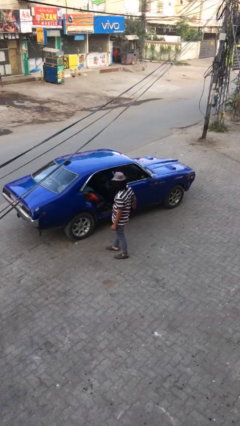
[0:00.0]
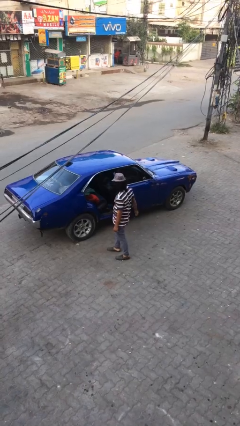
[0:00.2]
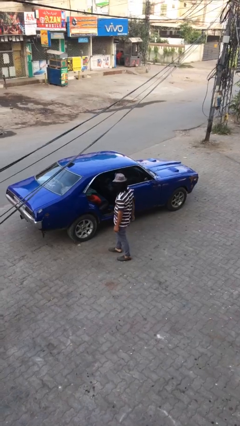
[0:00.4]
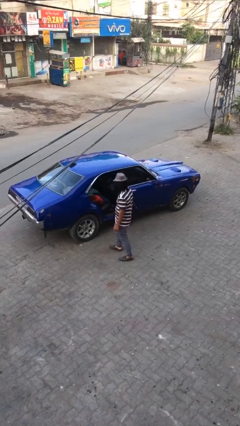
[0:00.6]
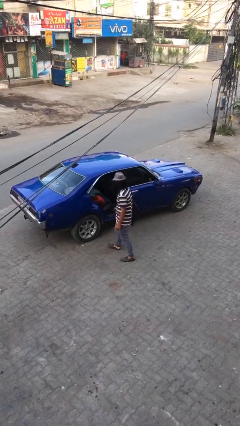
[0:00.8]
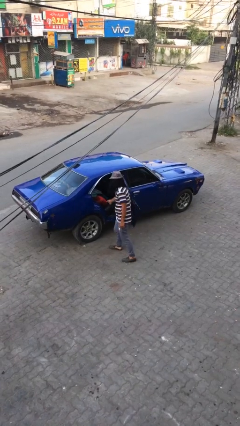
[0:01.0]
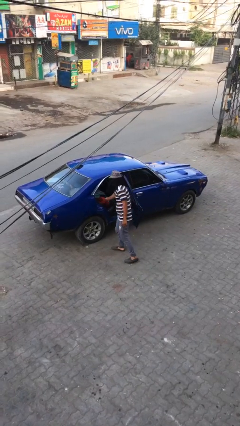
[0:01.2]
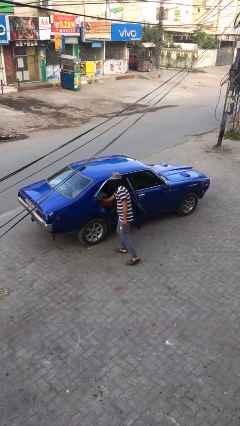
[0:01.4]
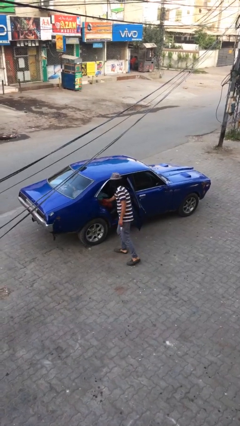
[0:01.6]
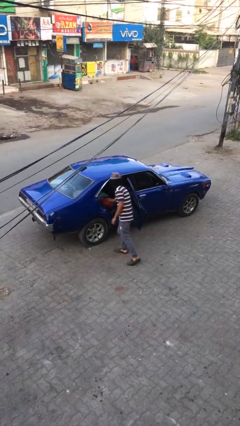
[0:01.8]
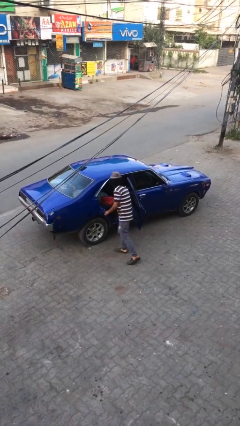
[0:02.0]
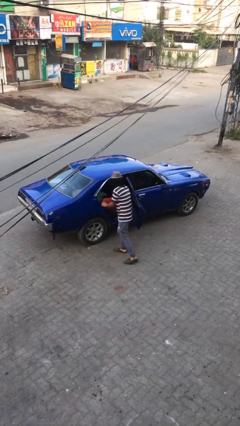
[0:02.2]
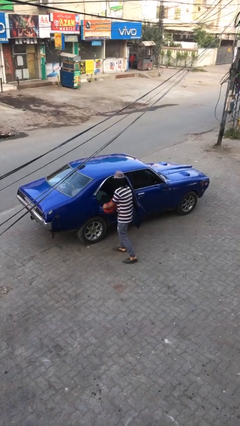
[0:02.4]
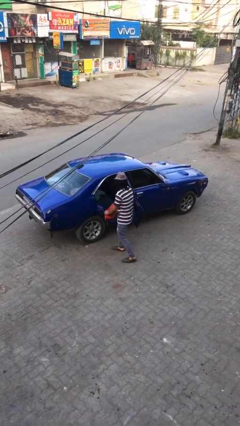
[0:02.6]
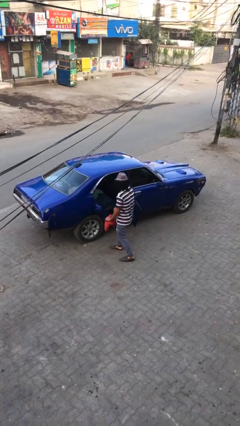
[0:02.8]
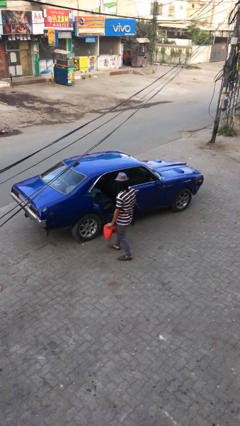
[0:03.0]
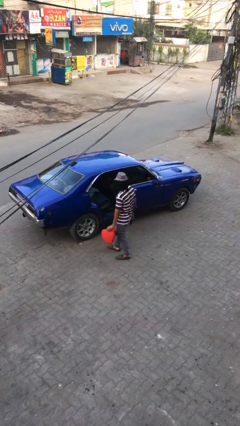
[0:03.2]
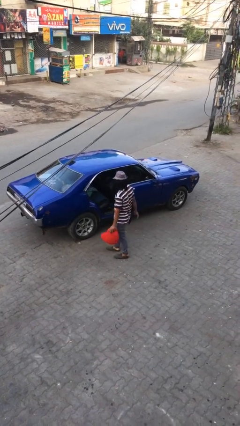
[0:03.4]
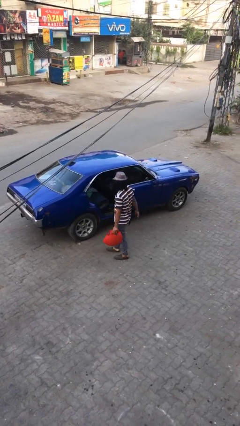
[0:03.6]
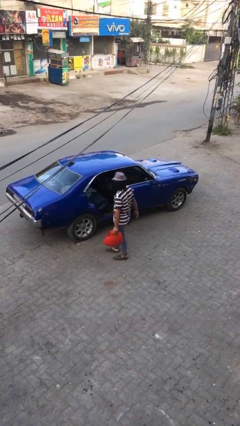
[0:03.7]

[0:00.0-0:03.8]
person unloads car

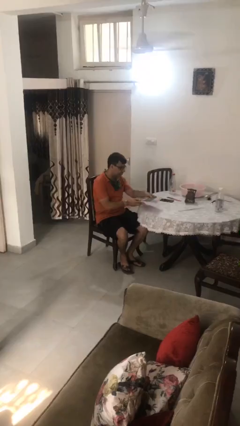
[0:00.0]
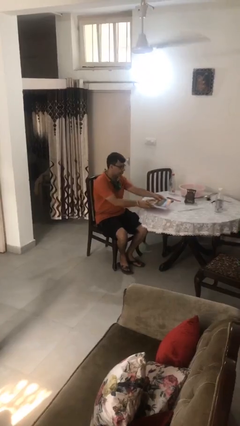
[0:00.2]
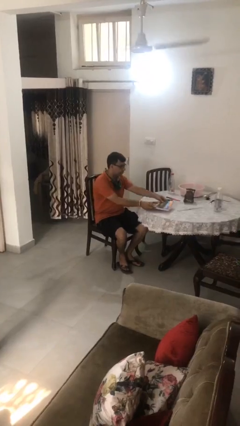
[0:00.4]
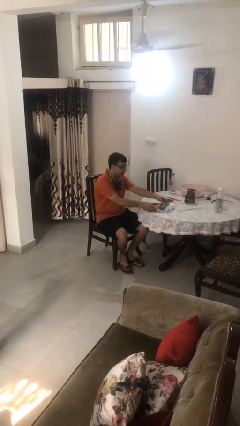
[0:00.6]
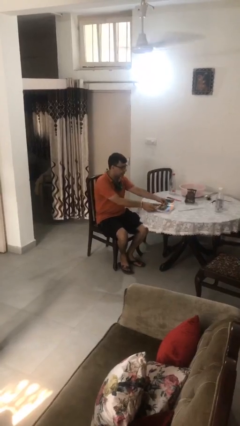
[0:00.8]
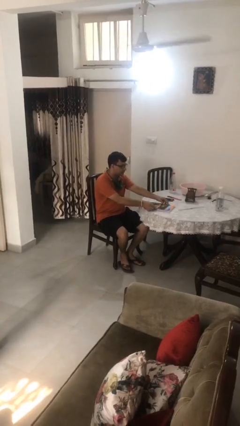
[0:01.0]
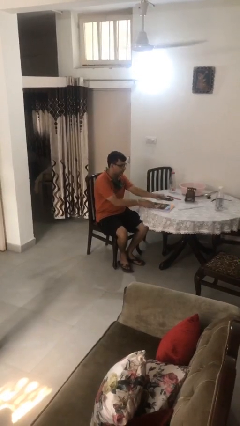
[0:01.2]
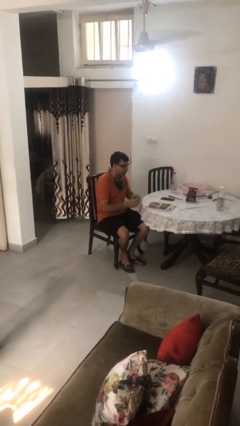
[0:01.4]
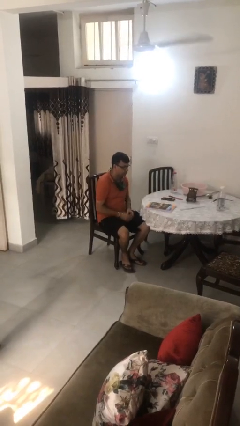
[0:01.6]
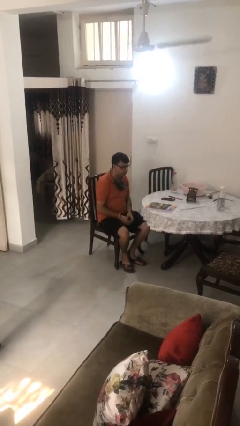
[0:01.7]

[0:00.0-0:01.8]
person puts down object on table

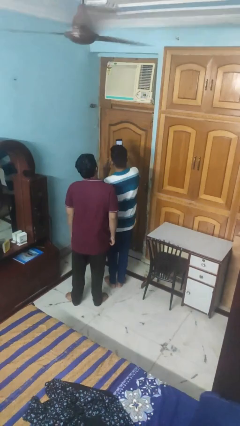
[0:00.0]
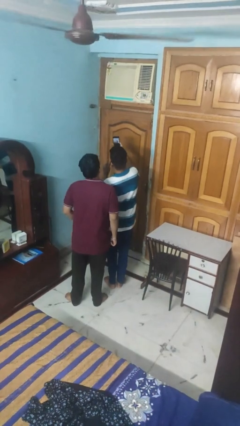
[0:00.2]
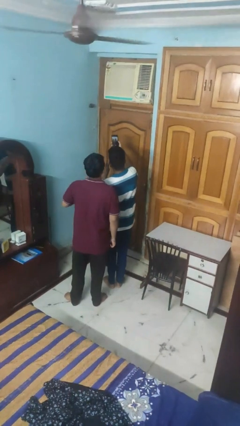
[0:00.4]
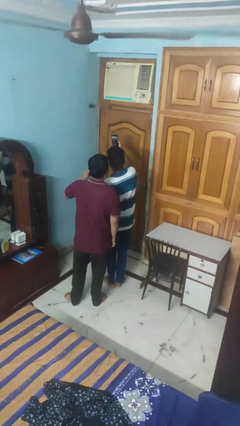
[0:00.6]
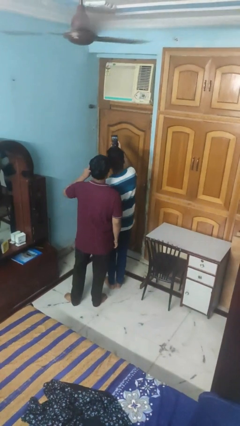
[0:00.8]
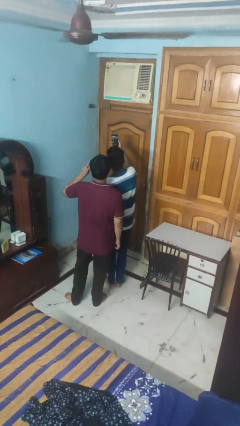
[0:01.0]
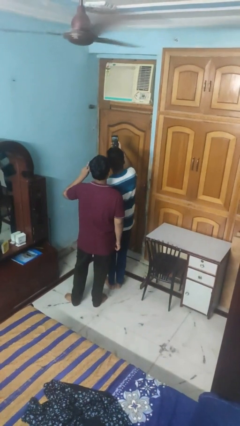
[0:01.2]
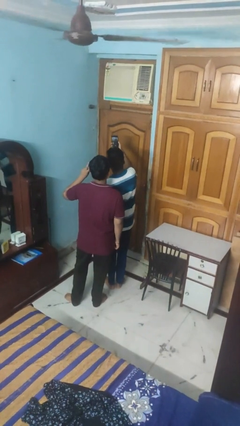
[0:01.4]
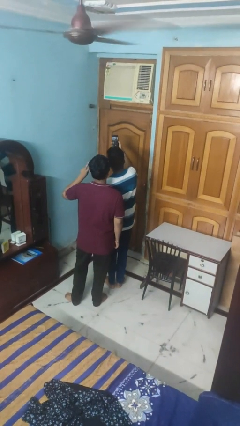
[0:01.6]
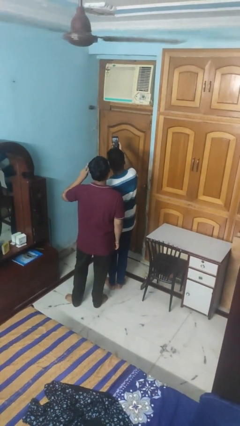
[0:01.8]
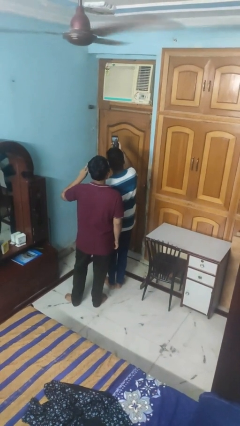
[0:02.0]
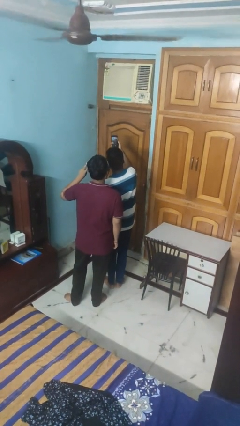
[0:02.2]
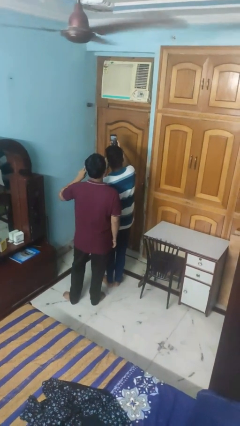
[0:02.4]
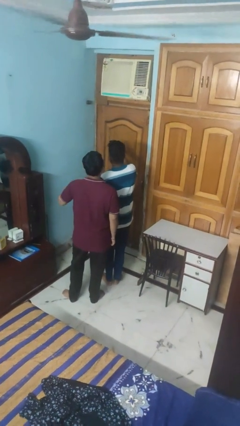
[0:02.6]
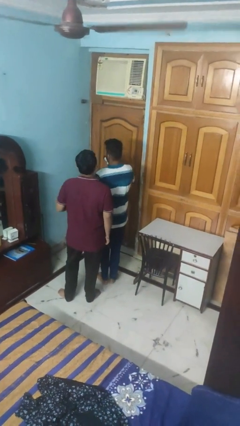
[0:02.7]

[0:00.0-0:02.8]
person takes selfie with person

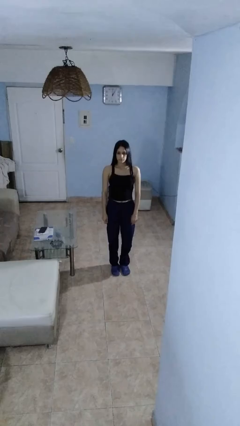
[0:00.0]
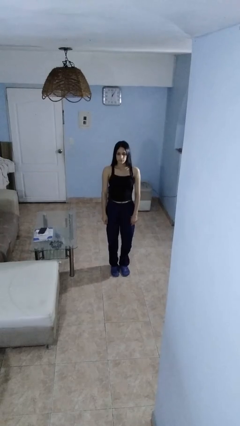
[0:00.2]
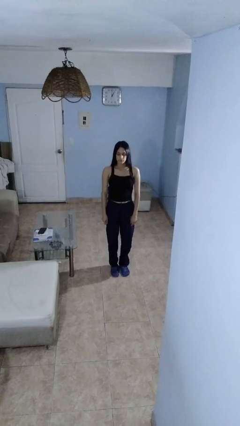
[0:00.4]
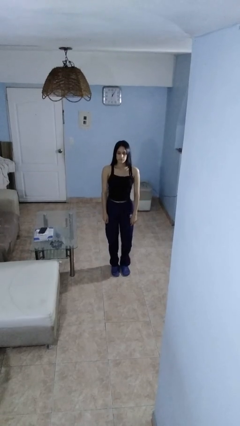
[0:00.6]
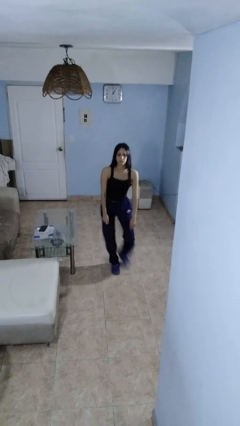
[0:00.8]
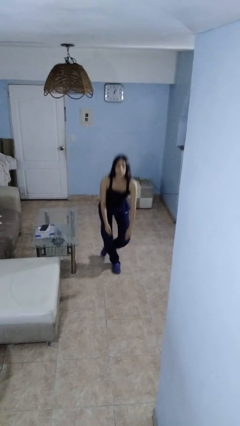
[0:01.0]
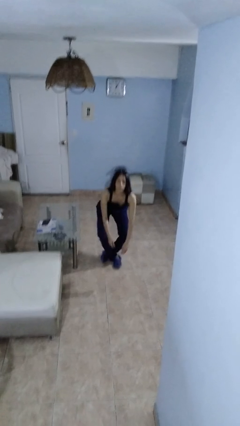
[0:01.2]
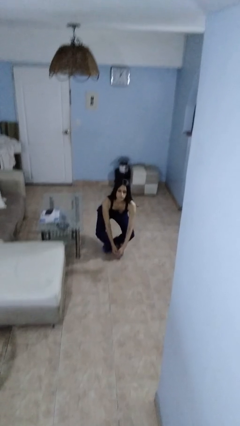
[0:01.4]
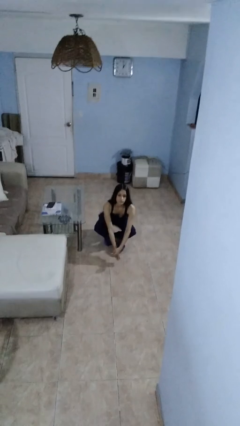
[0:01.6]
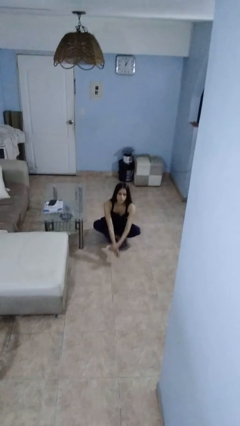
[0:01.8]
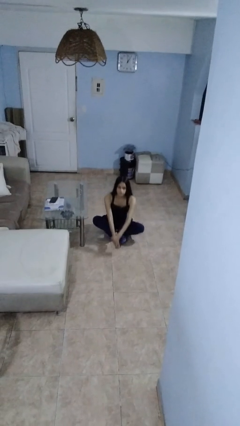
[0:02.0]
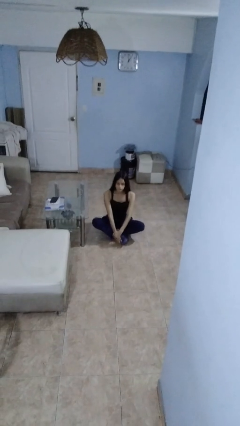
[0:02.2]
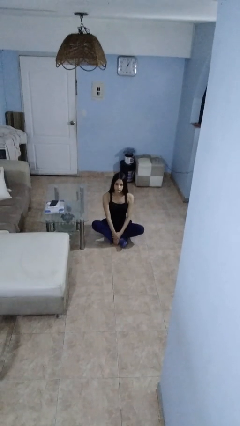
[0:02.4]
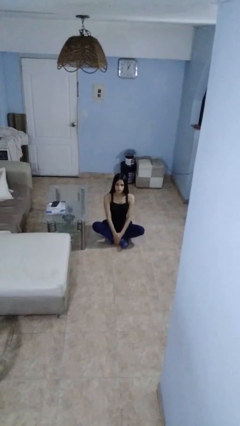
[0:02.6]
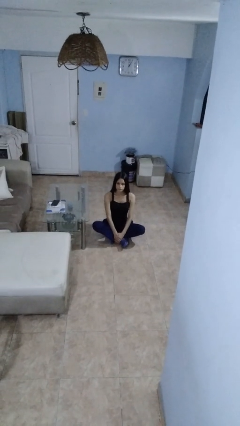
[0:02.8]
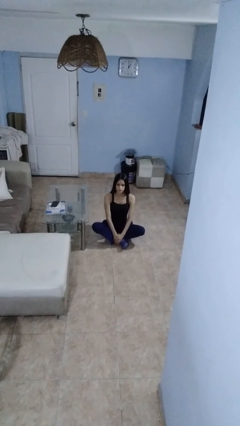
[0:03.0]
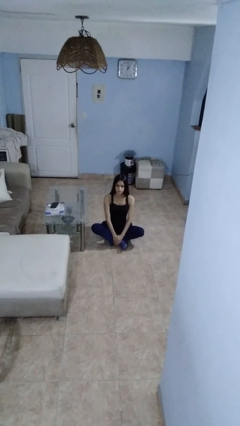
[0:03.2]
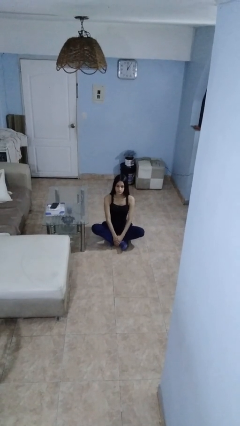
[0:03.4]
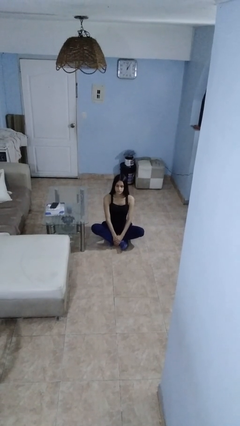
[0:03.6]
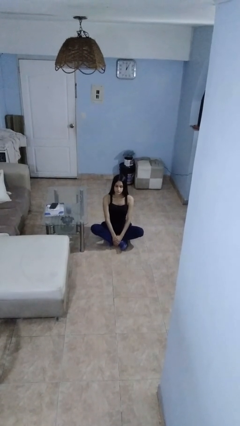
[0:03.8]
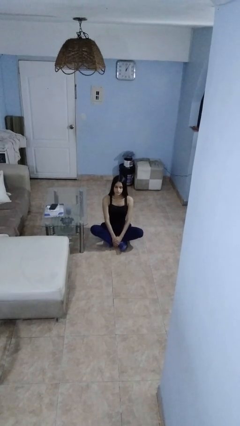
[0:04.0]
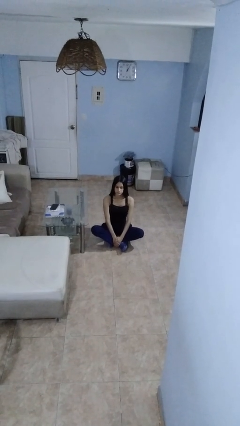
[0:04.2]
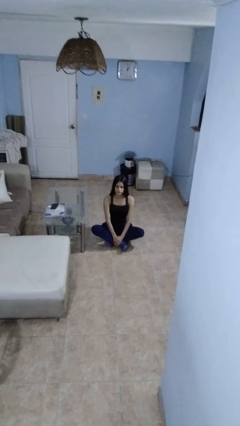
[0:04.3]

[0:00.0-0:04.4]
person sits crisscross

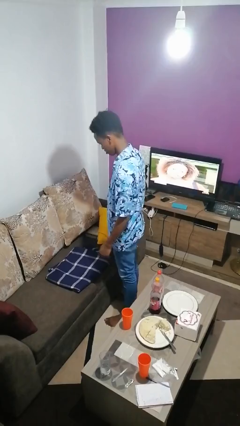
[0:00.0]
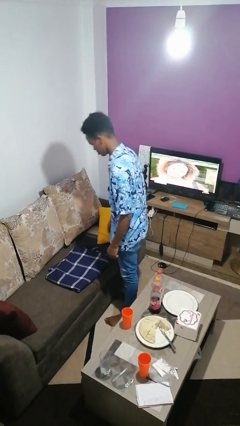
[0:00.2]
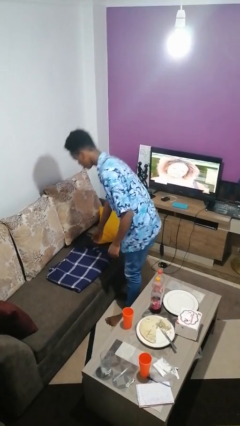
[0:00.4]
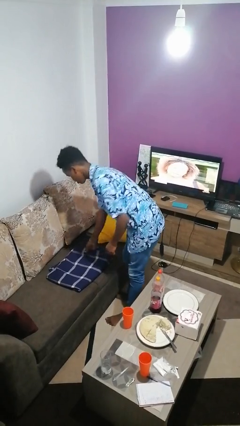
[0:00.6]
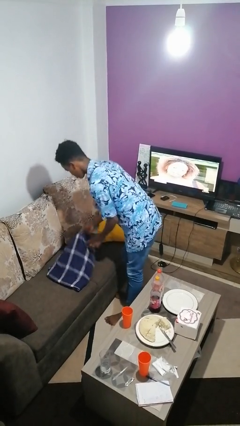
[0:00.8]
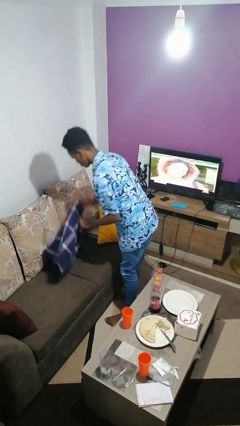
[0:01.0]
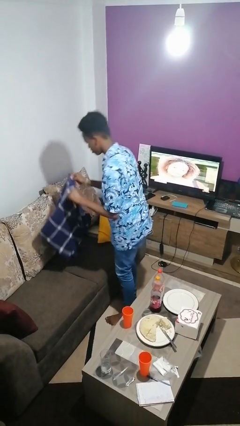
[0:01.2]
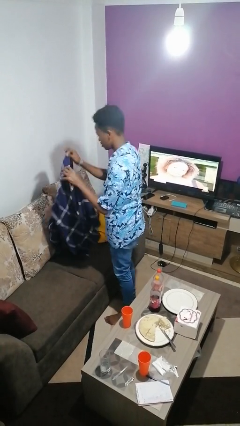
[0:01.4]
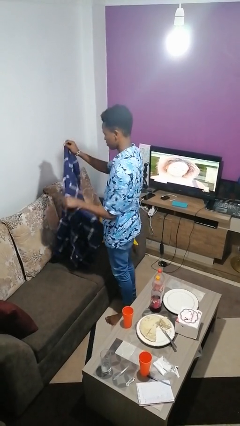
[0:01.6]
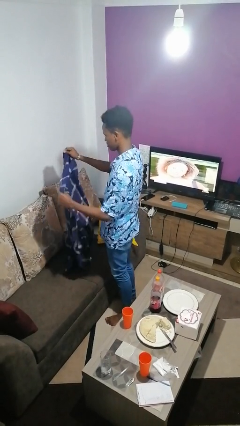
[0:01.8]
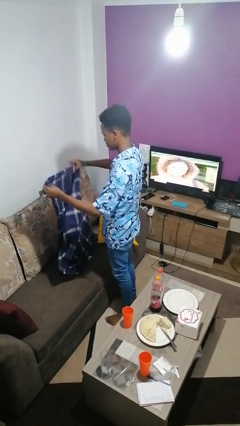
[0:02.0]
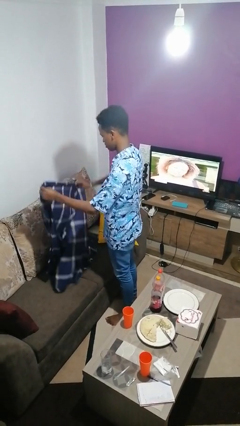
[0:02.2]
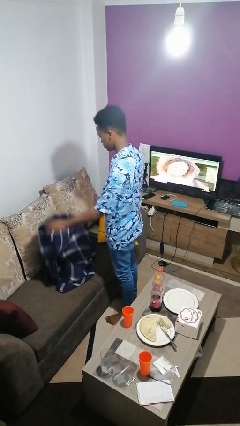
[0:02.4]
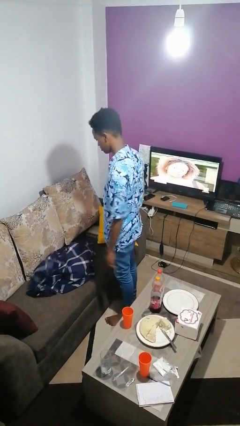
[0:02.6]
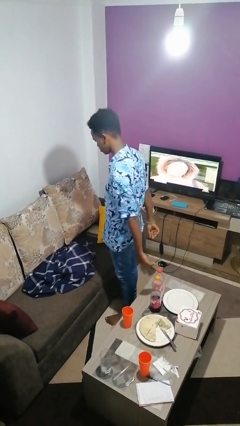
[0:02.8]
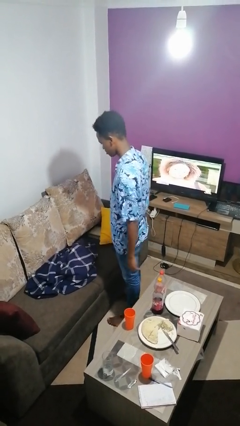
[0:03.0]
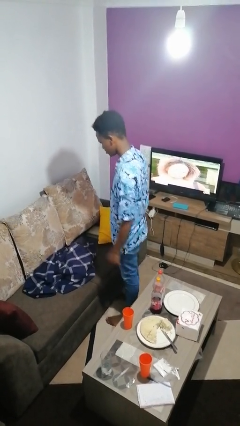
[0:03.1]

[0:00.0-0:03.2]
person unfolds blanket

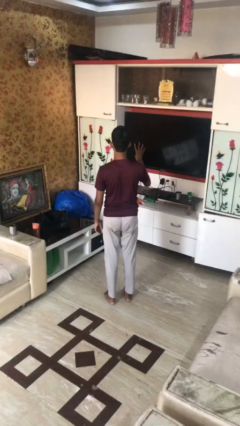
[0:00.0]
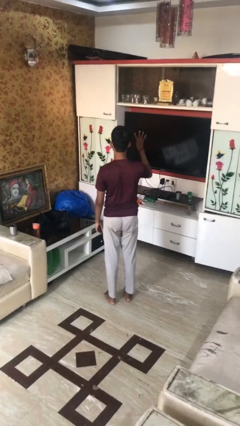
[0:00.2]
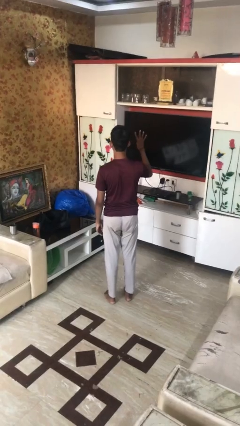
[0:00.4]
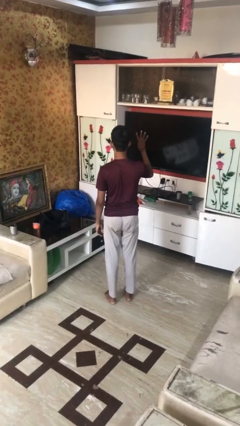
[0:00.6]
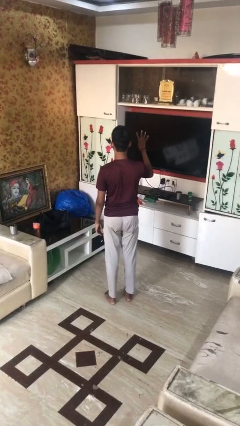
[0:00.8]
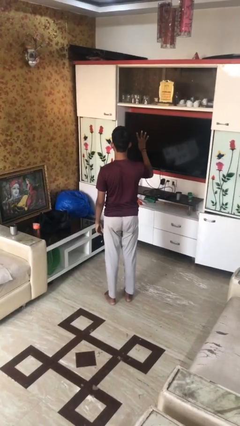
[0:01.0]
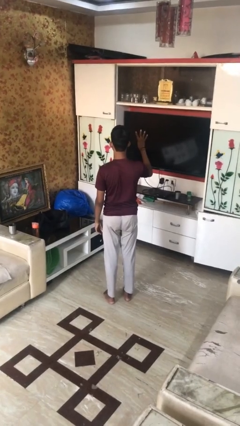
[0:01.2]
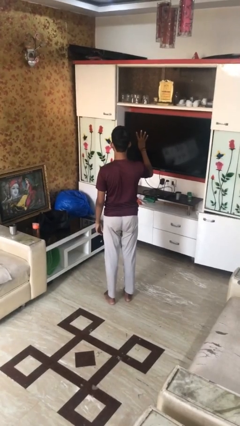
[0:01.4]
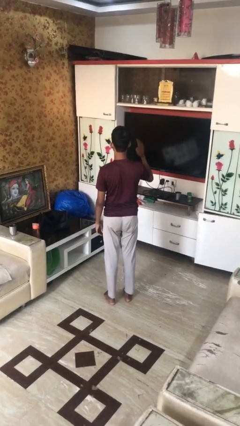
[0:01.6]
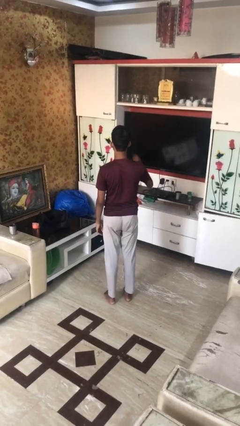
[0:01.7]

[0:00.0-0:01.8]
person gestures number four
